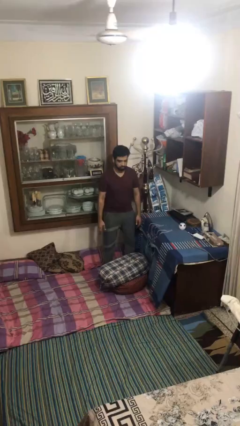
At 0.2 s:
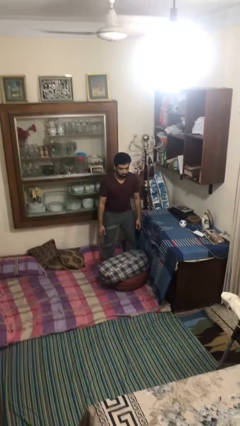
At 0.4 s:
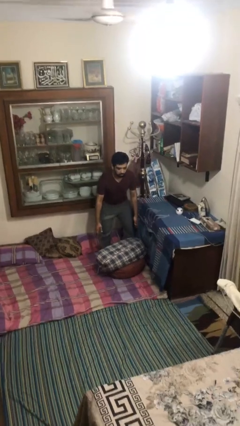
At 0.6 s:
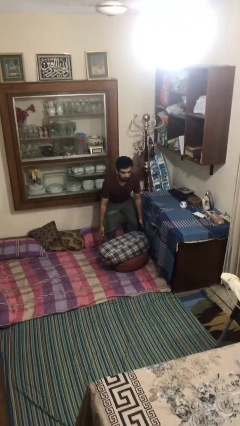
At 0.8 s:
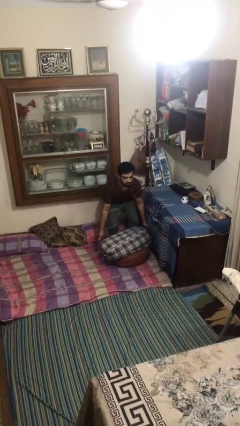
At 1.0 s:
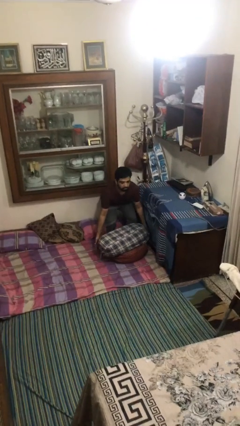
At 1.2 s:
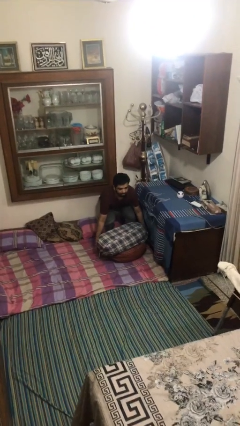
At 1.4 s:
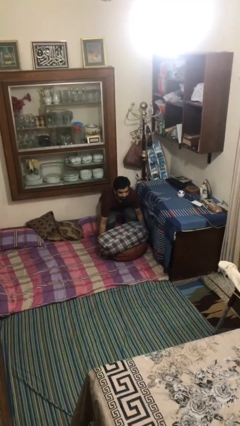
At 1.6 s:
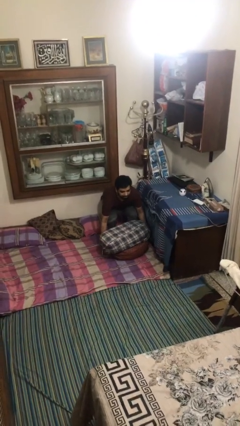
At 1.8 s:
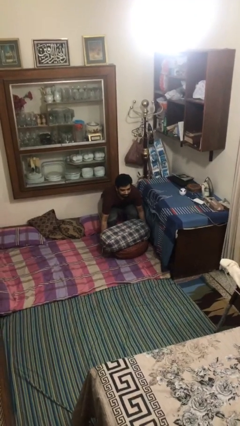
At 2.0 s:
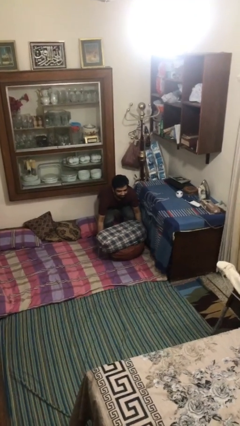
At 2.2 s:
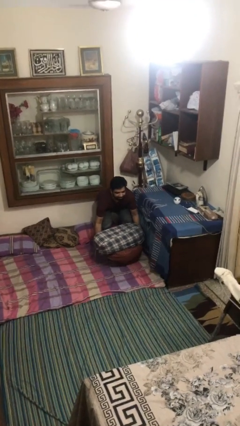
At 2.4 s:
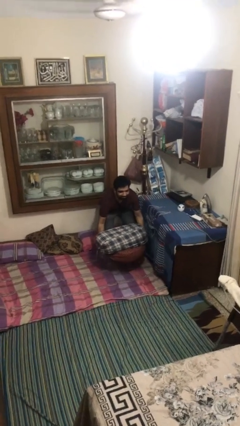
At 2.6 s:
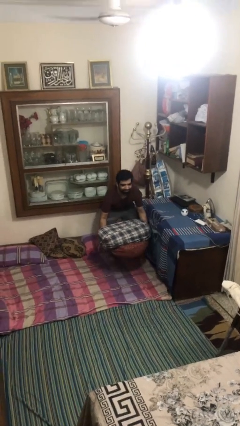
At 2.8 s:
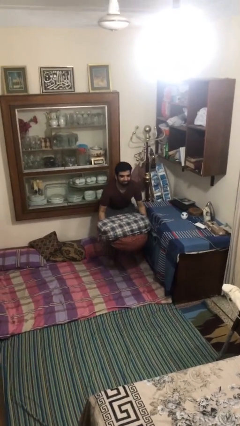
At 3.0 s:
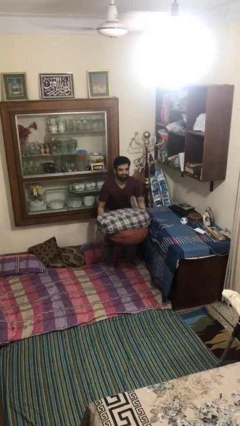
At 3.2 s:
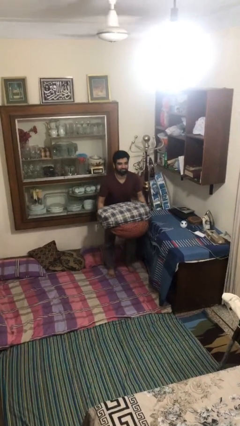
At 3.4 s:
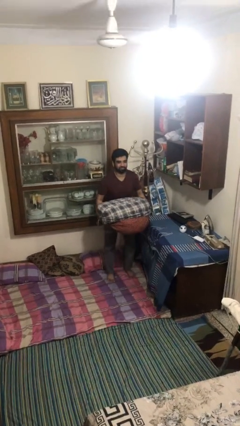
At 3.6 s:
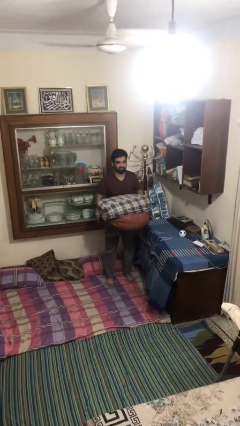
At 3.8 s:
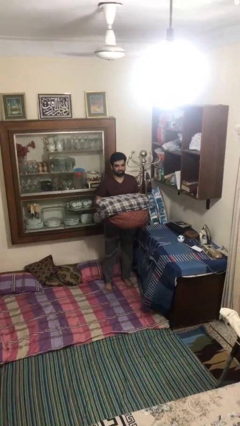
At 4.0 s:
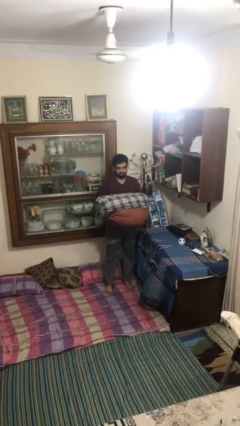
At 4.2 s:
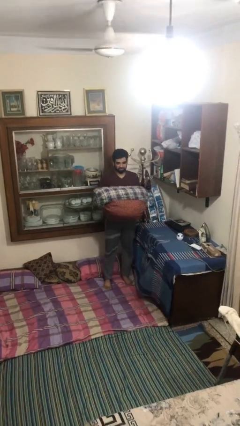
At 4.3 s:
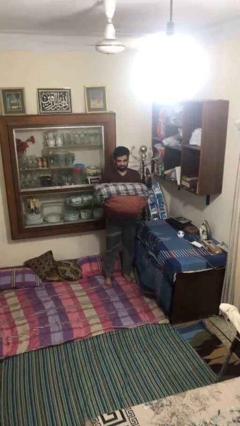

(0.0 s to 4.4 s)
person picks up object from floor

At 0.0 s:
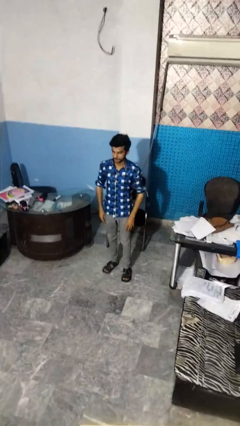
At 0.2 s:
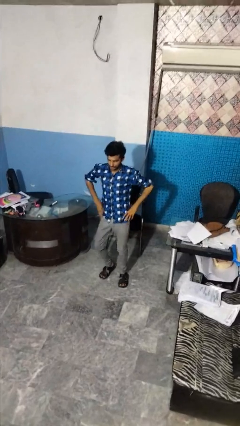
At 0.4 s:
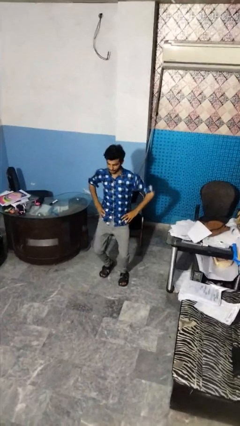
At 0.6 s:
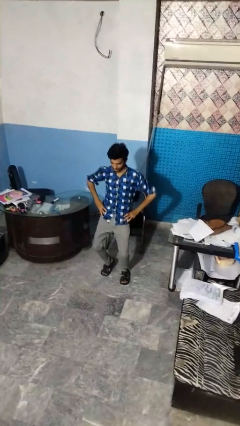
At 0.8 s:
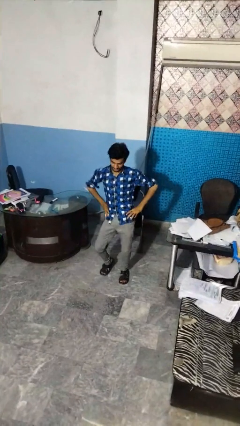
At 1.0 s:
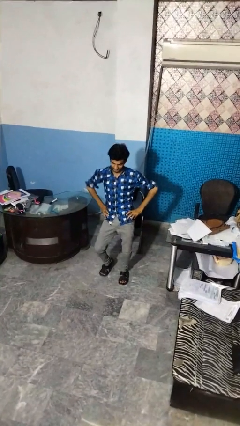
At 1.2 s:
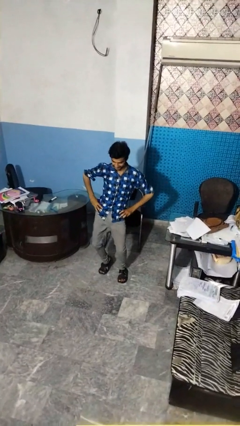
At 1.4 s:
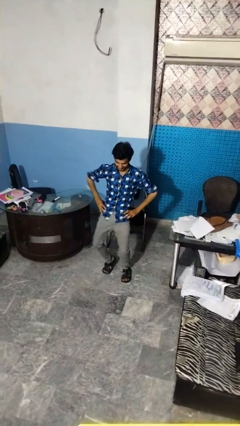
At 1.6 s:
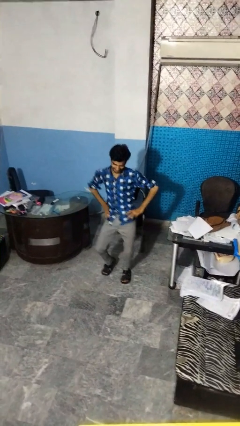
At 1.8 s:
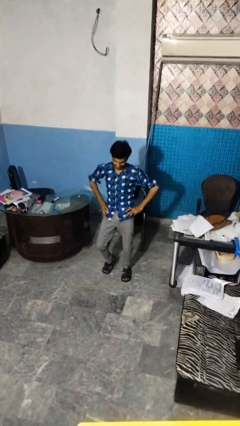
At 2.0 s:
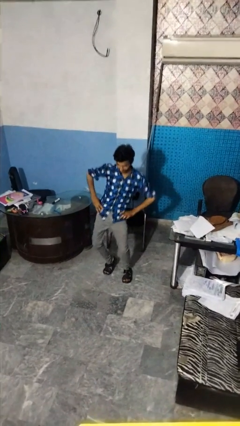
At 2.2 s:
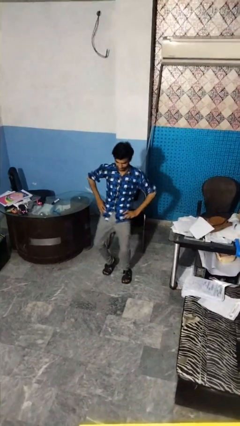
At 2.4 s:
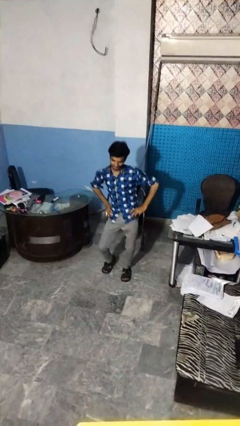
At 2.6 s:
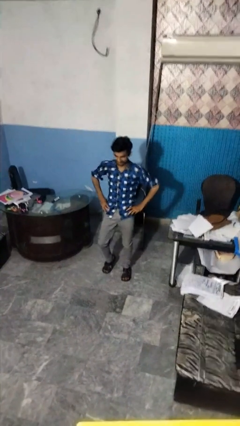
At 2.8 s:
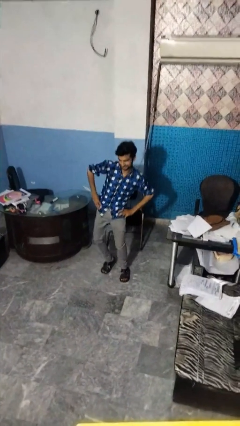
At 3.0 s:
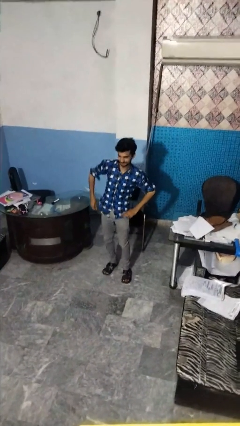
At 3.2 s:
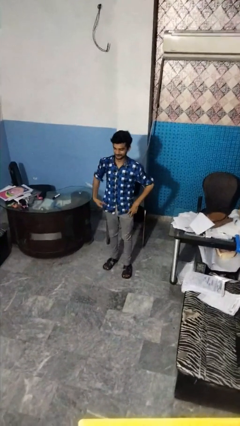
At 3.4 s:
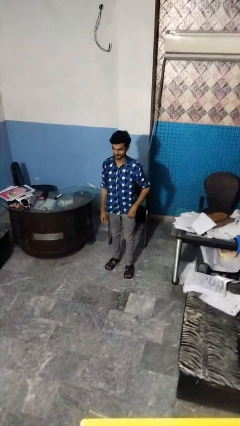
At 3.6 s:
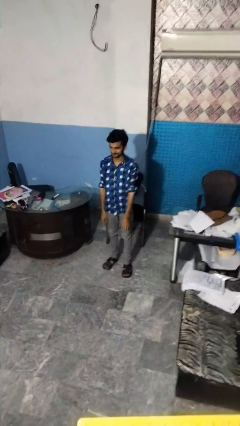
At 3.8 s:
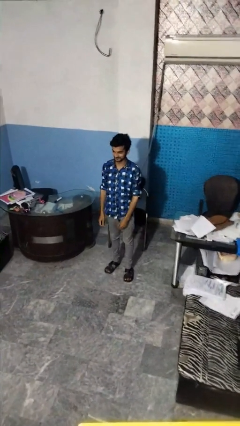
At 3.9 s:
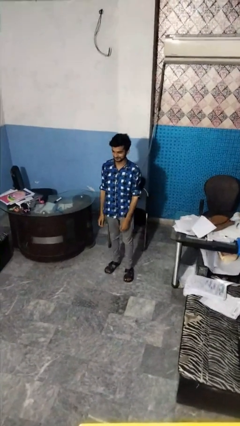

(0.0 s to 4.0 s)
person dances in place

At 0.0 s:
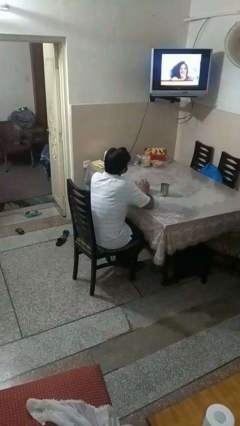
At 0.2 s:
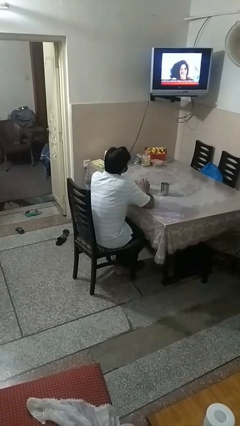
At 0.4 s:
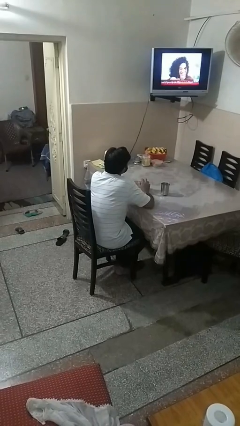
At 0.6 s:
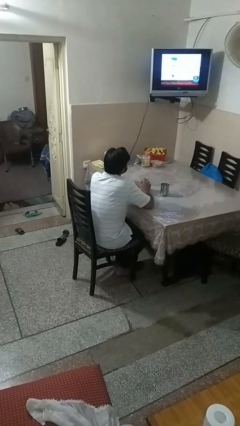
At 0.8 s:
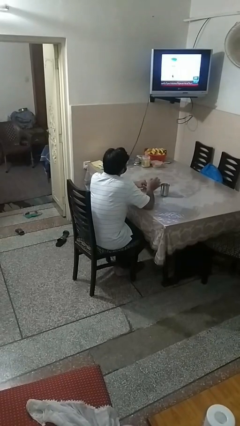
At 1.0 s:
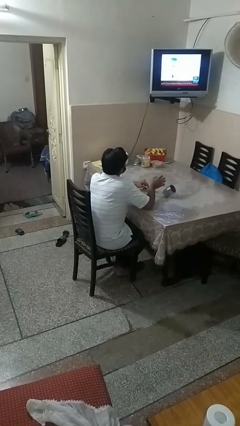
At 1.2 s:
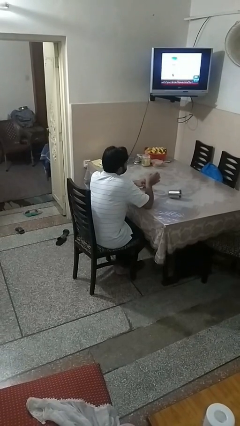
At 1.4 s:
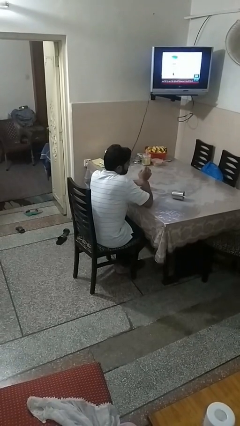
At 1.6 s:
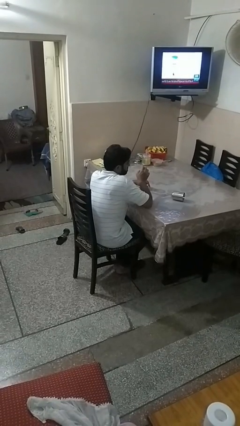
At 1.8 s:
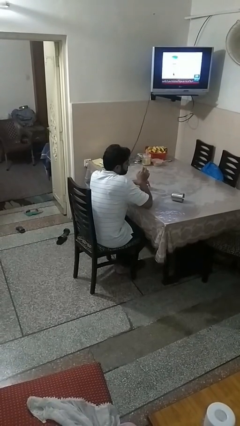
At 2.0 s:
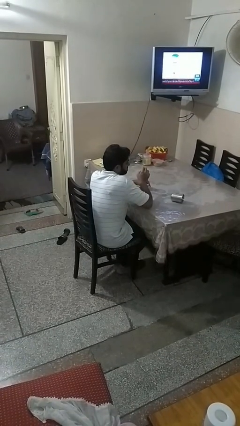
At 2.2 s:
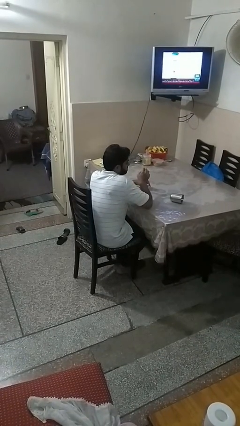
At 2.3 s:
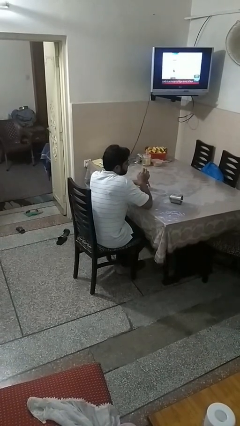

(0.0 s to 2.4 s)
person knocks over glass

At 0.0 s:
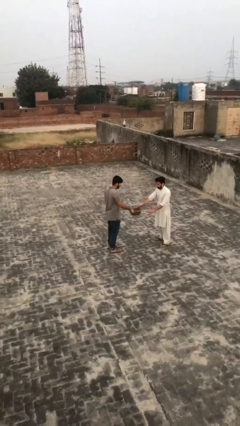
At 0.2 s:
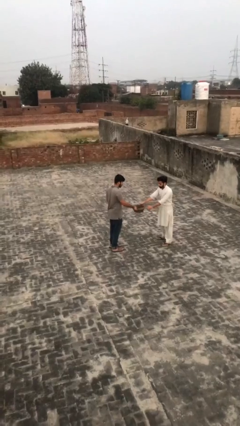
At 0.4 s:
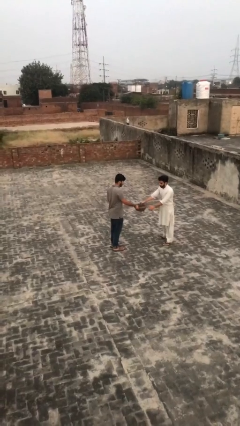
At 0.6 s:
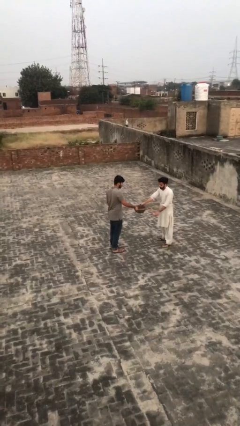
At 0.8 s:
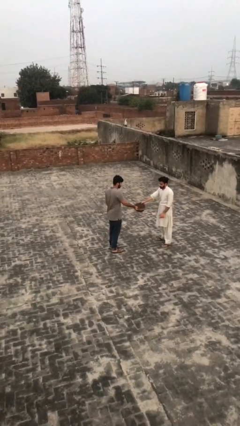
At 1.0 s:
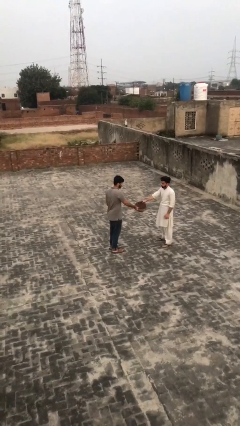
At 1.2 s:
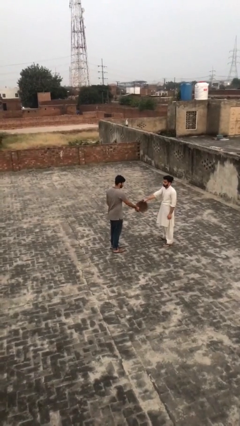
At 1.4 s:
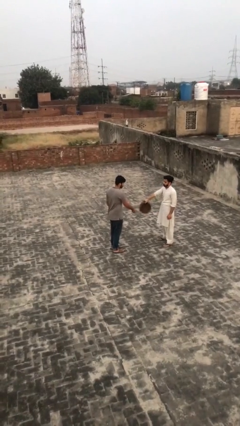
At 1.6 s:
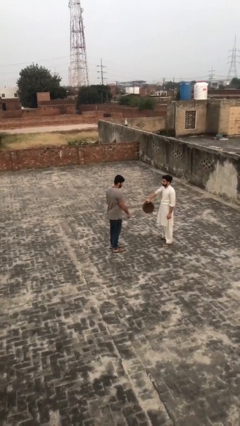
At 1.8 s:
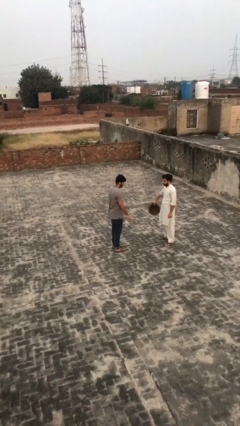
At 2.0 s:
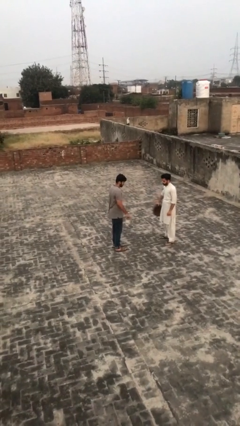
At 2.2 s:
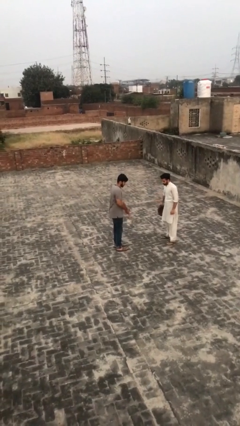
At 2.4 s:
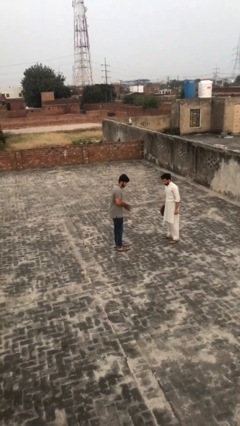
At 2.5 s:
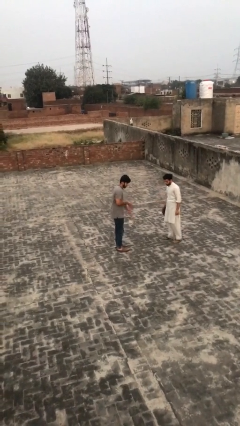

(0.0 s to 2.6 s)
person transfers object to person

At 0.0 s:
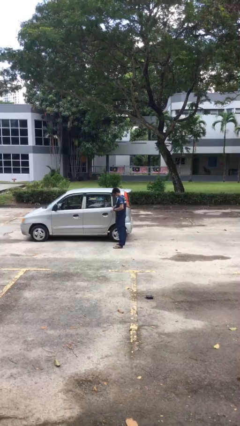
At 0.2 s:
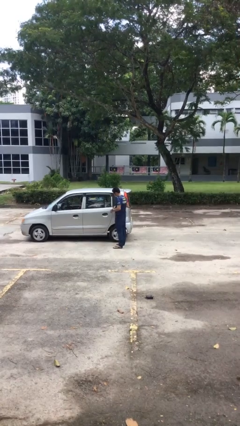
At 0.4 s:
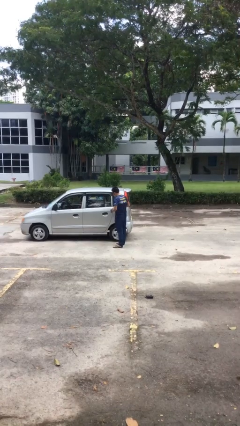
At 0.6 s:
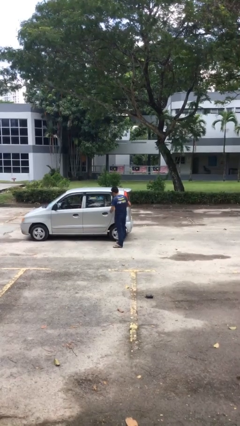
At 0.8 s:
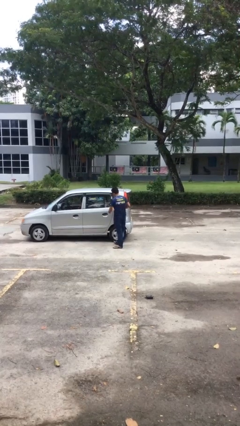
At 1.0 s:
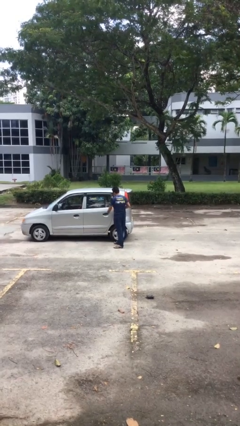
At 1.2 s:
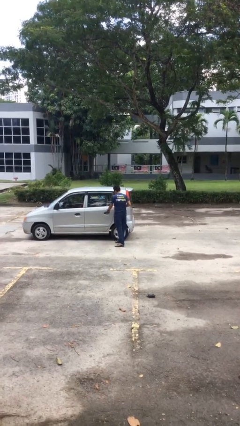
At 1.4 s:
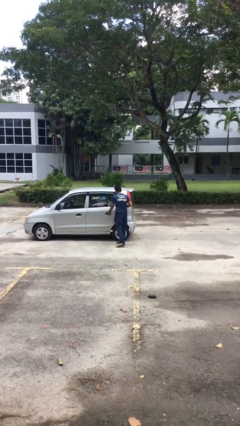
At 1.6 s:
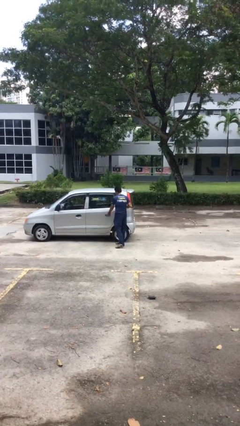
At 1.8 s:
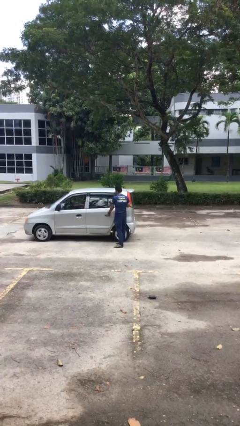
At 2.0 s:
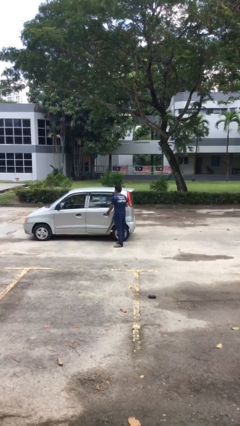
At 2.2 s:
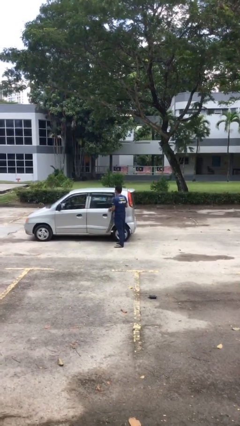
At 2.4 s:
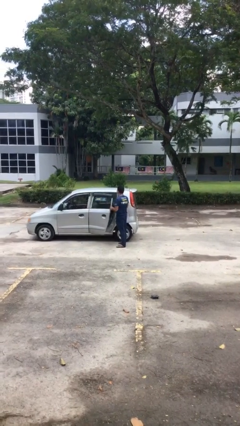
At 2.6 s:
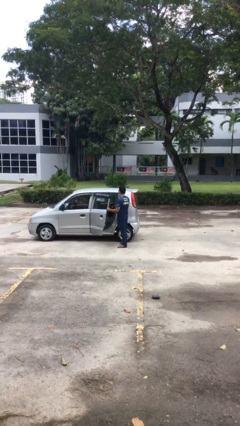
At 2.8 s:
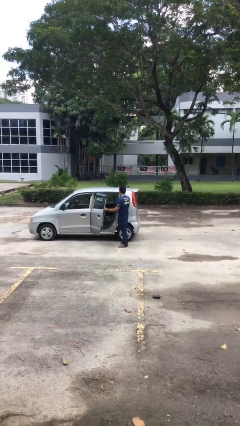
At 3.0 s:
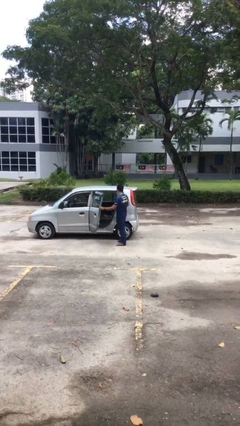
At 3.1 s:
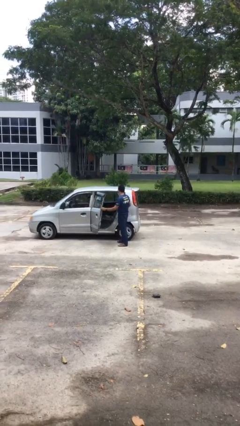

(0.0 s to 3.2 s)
person opens car door

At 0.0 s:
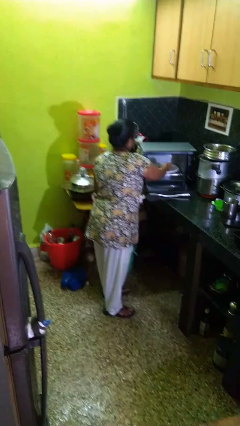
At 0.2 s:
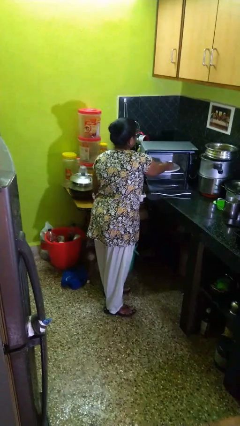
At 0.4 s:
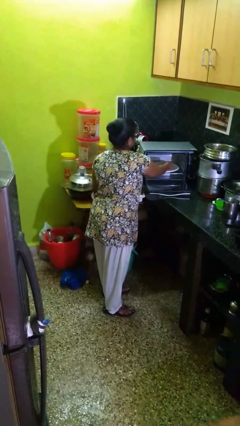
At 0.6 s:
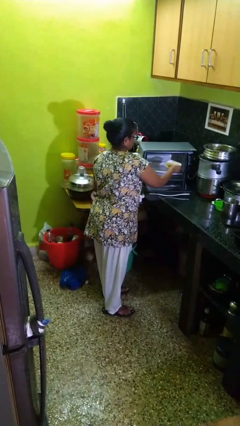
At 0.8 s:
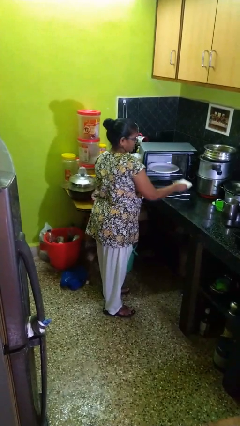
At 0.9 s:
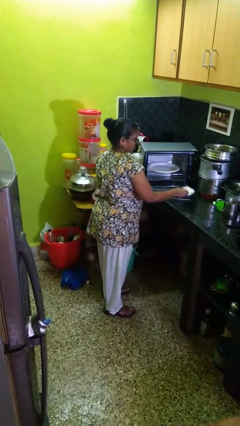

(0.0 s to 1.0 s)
person takes object from microwave
